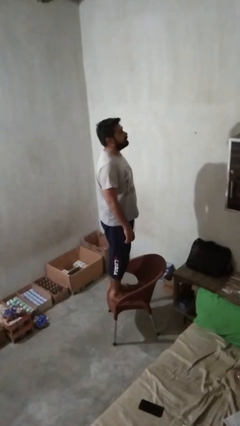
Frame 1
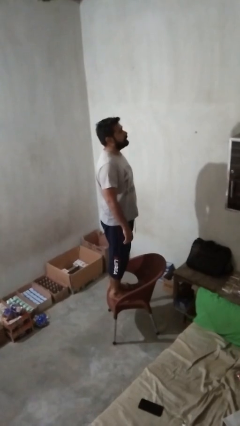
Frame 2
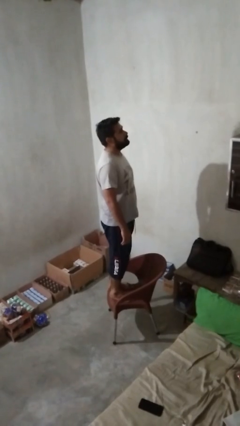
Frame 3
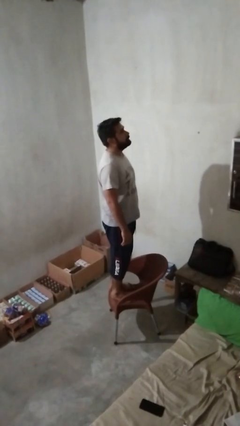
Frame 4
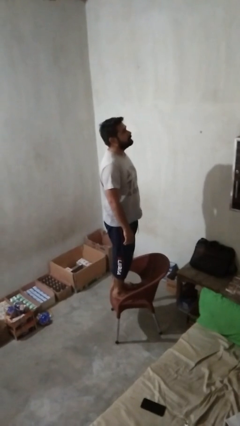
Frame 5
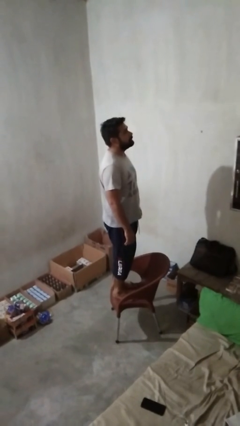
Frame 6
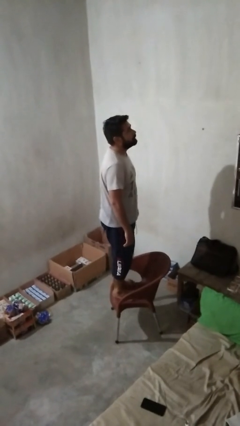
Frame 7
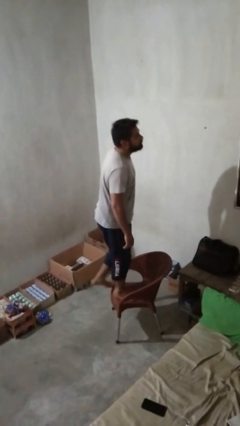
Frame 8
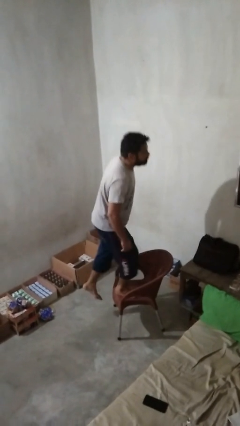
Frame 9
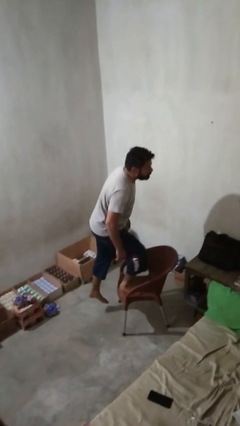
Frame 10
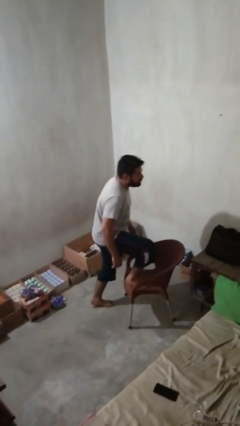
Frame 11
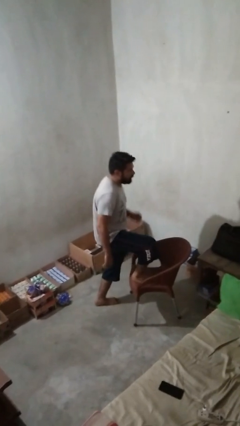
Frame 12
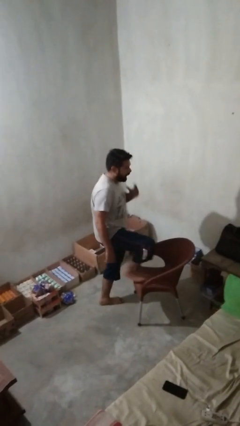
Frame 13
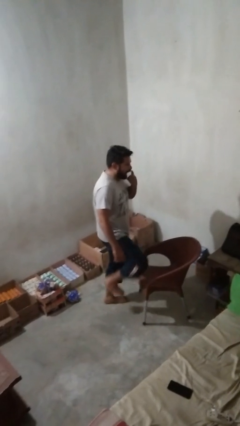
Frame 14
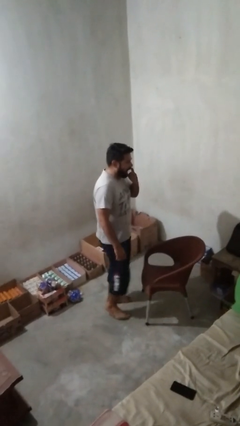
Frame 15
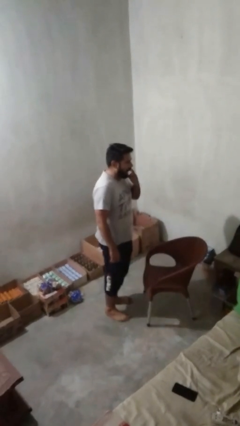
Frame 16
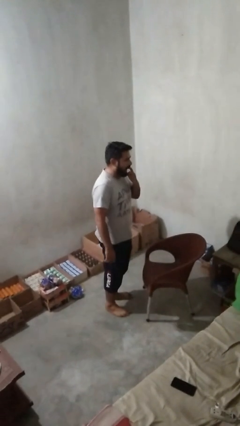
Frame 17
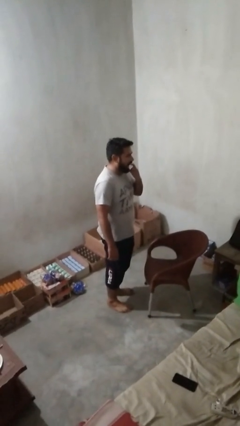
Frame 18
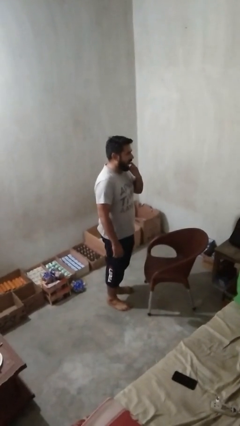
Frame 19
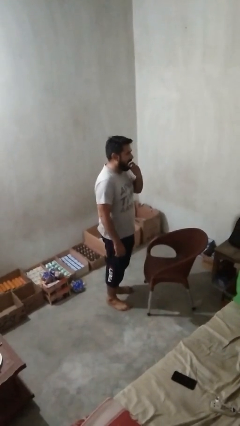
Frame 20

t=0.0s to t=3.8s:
person climbs off chair

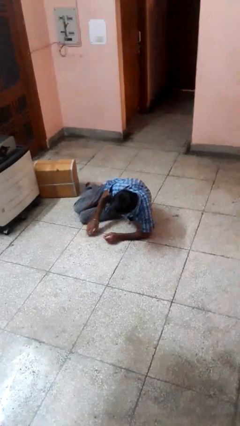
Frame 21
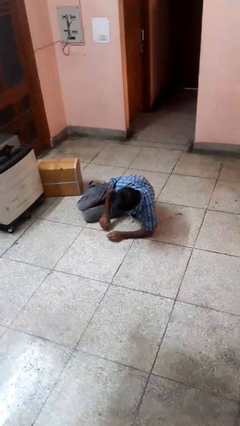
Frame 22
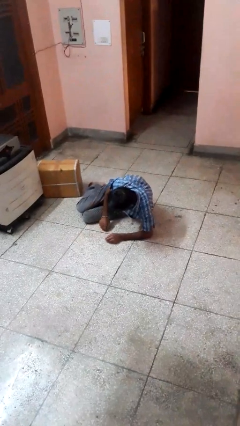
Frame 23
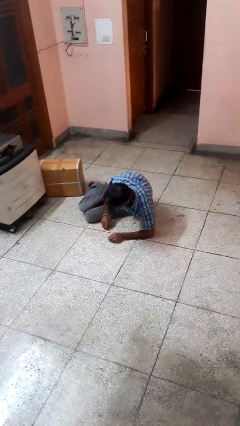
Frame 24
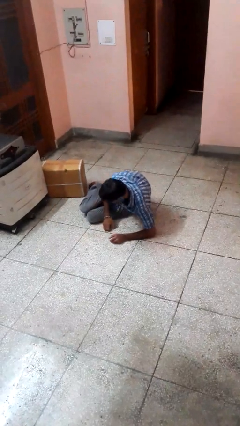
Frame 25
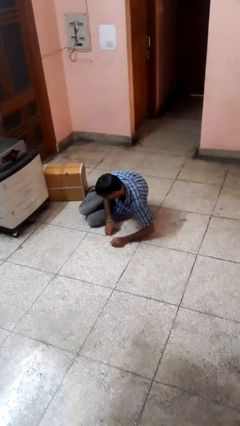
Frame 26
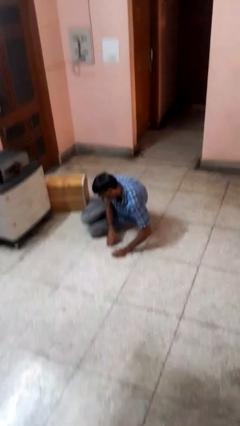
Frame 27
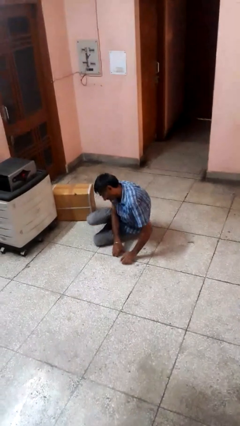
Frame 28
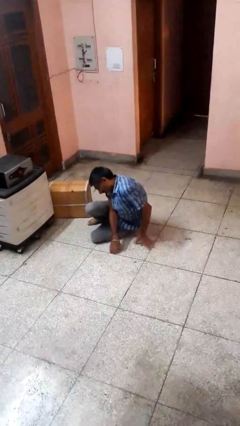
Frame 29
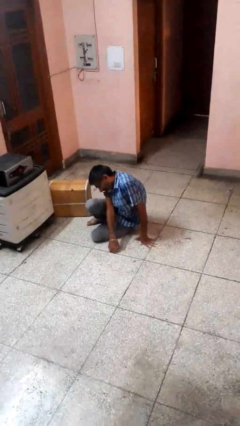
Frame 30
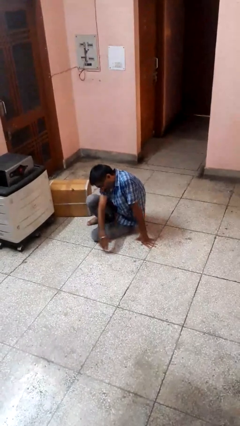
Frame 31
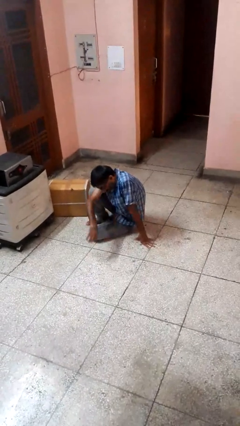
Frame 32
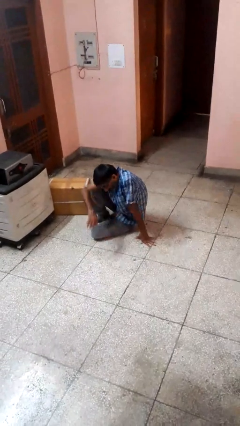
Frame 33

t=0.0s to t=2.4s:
person lies down on floor

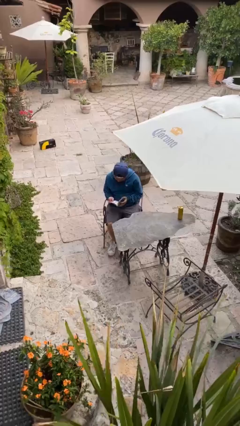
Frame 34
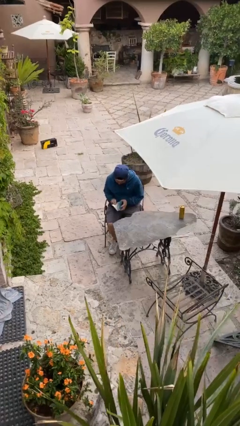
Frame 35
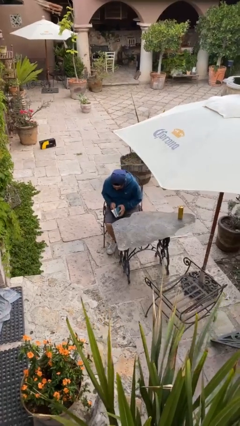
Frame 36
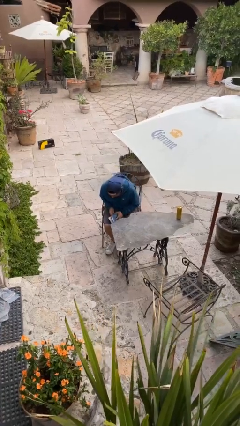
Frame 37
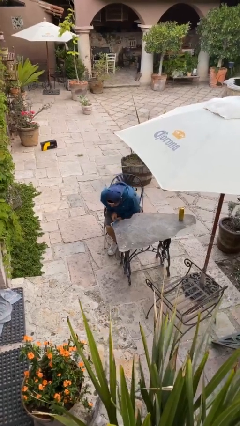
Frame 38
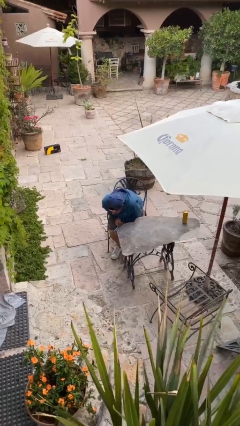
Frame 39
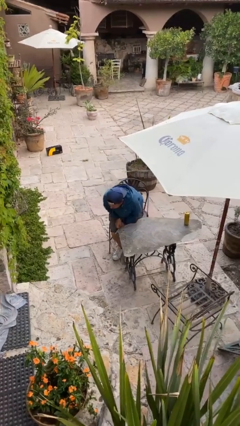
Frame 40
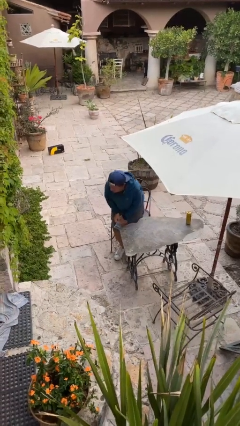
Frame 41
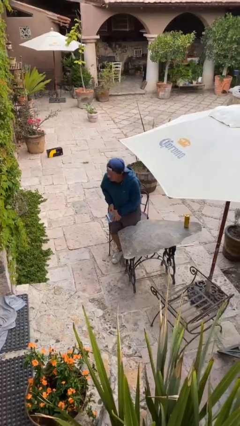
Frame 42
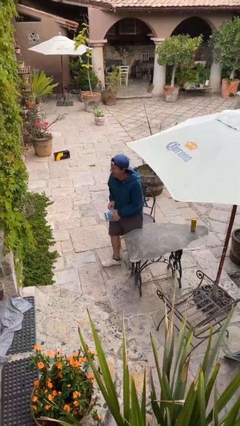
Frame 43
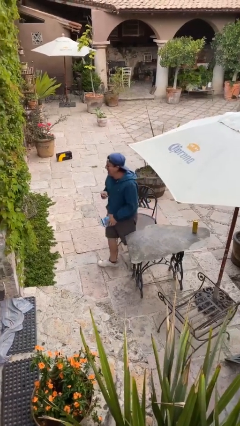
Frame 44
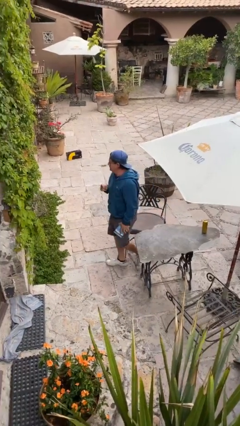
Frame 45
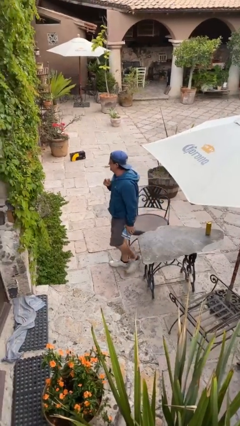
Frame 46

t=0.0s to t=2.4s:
person stands up

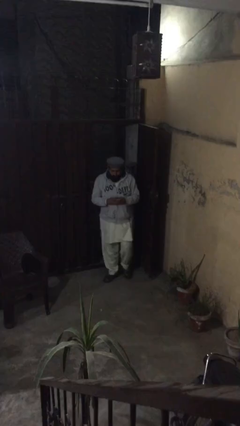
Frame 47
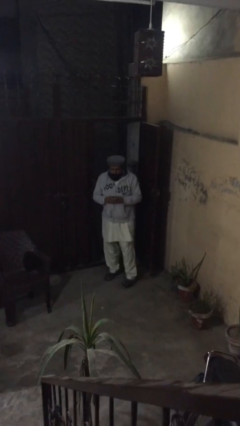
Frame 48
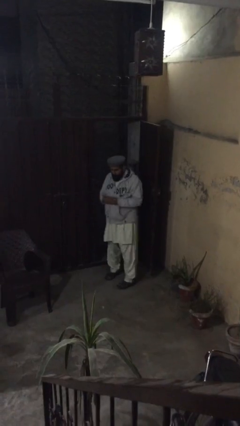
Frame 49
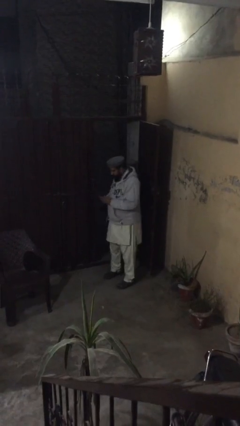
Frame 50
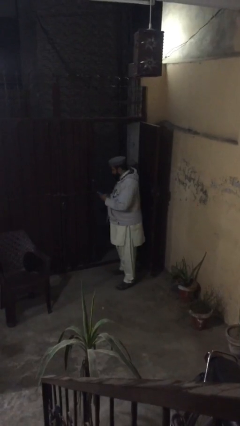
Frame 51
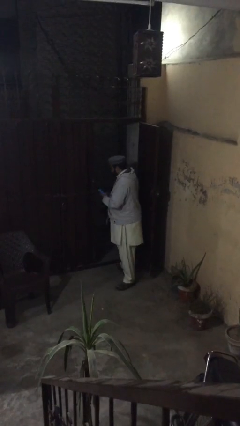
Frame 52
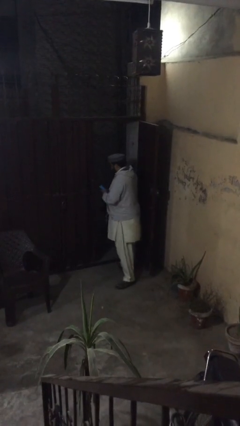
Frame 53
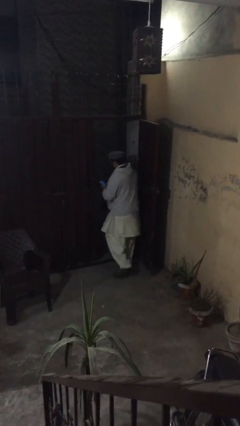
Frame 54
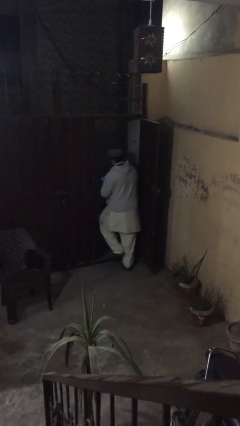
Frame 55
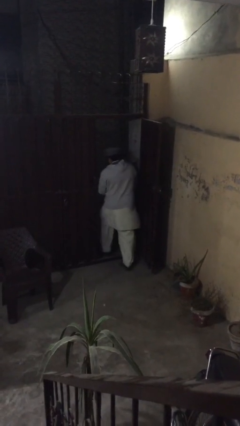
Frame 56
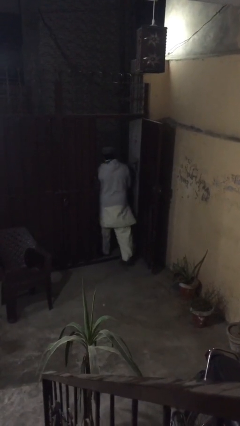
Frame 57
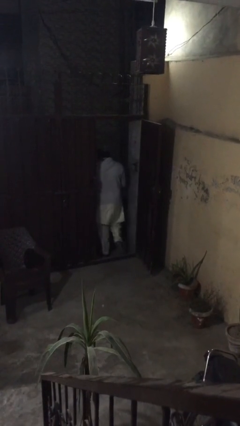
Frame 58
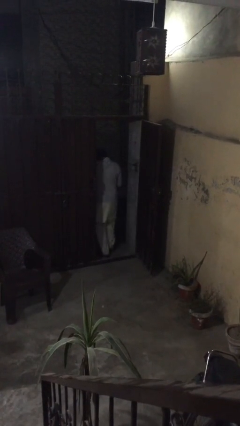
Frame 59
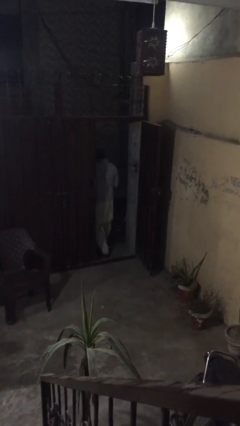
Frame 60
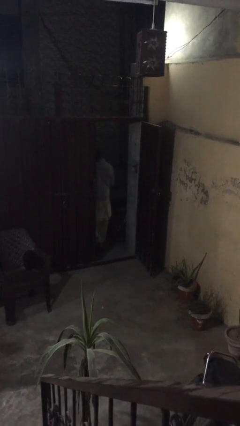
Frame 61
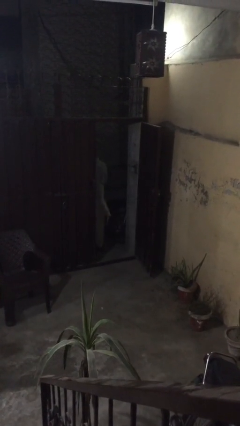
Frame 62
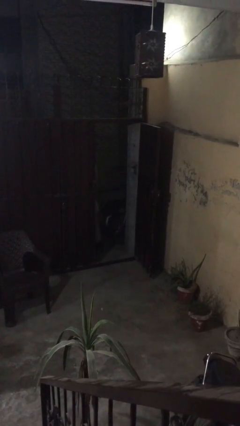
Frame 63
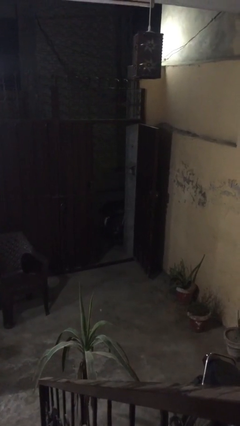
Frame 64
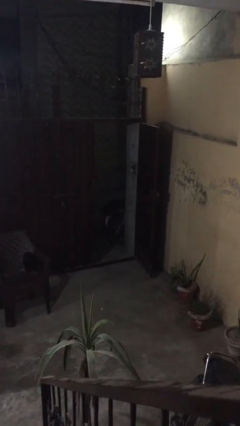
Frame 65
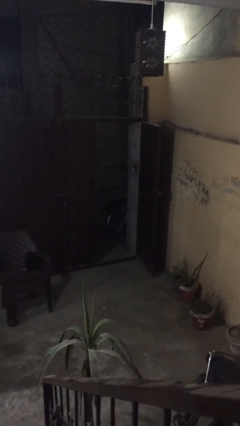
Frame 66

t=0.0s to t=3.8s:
person exits scene through structure

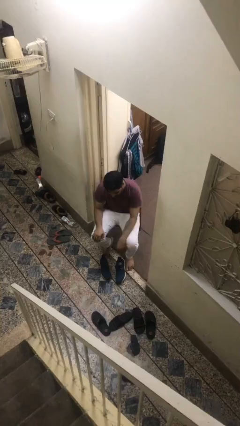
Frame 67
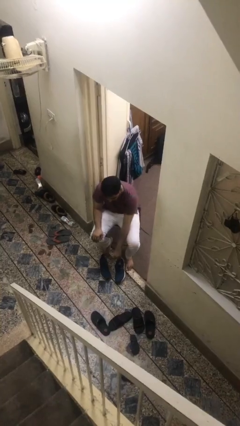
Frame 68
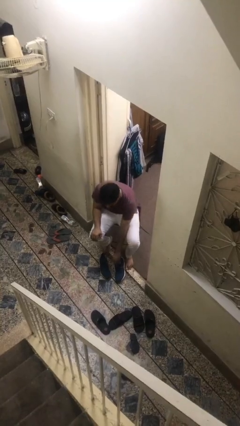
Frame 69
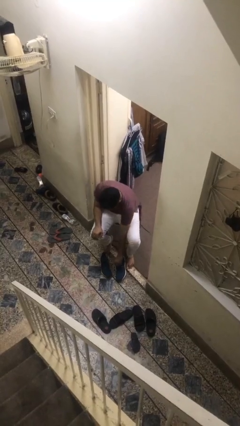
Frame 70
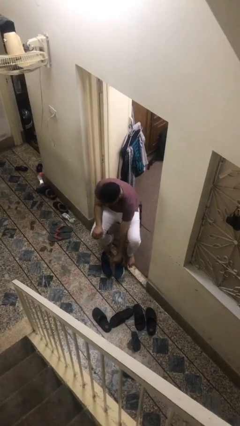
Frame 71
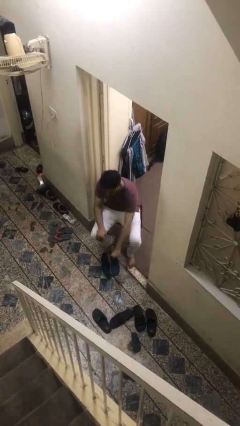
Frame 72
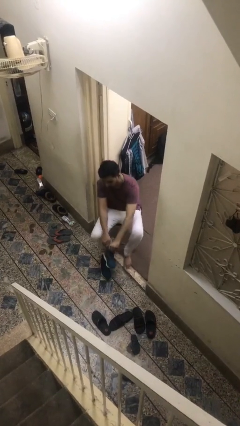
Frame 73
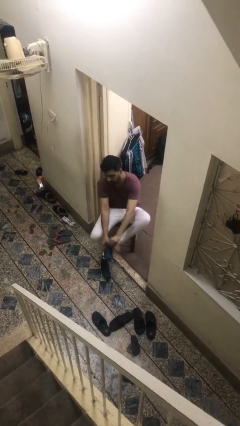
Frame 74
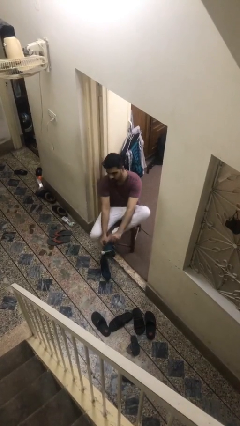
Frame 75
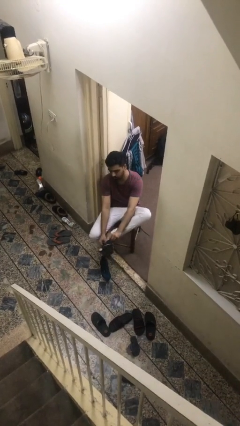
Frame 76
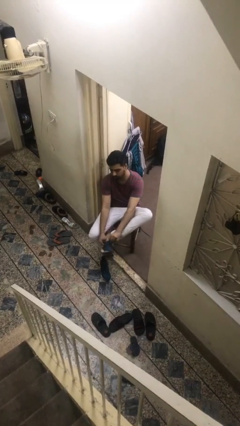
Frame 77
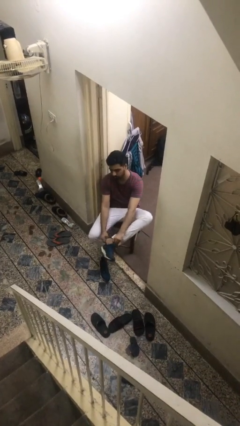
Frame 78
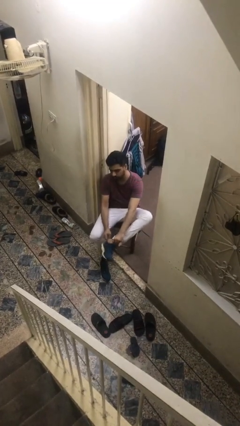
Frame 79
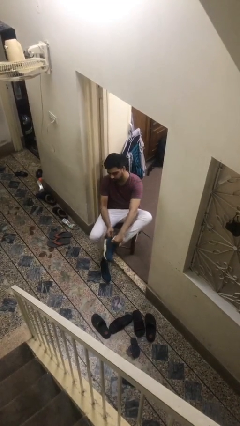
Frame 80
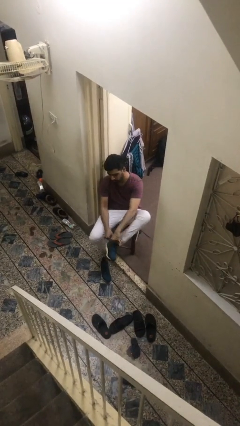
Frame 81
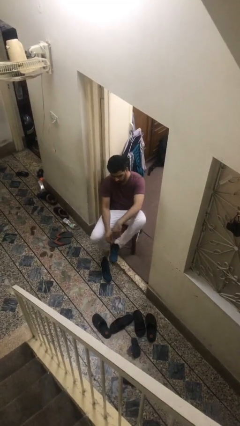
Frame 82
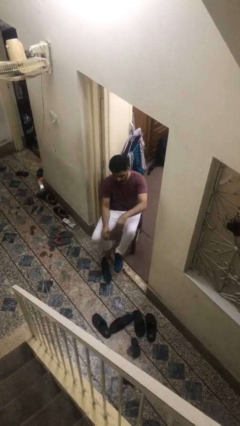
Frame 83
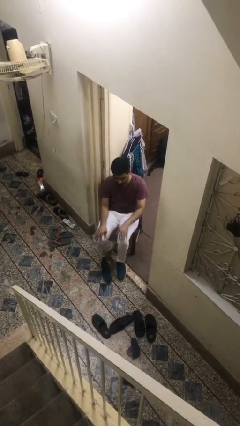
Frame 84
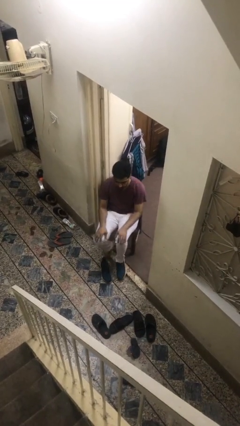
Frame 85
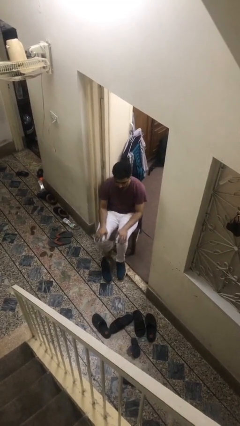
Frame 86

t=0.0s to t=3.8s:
person puts on shoes

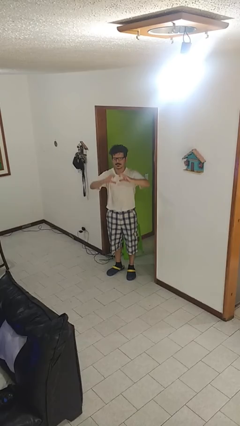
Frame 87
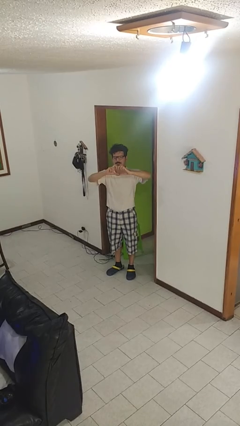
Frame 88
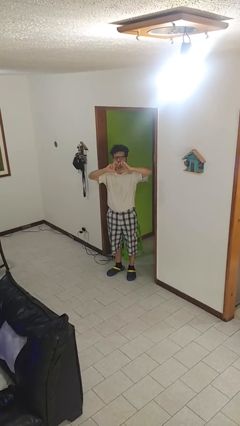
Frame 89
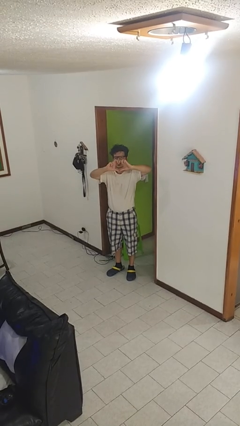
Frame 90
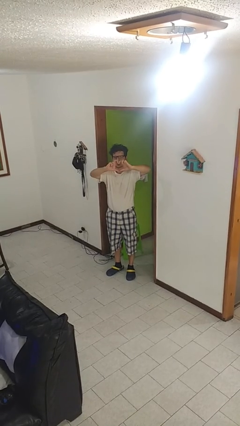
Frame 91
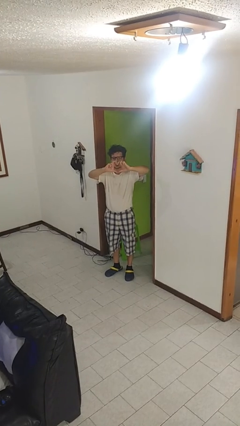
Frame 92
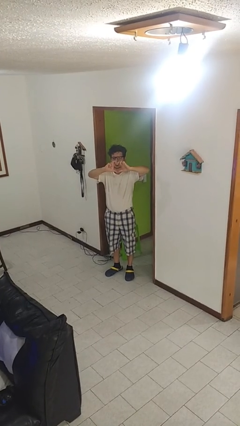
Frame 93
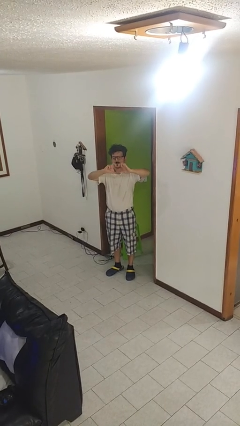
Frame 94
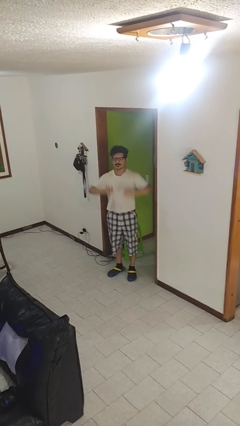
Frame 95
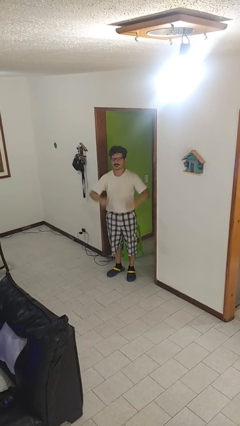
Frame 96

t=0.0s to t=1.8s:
person gestures heart
